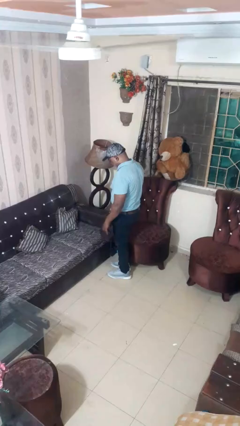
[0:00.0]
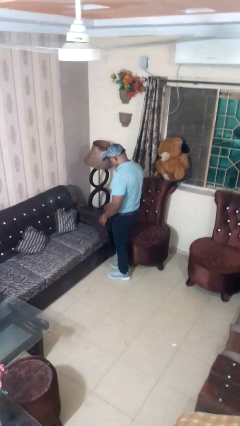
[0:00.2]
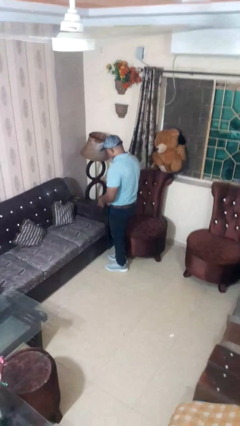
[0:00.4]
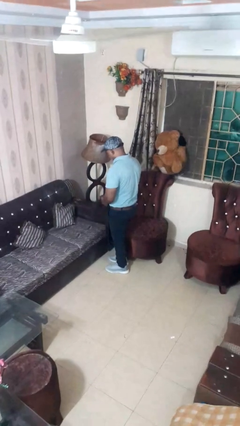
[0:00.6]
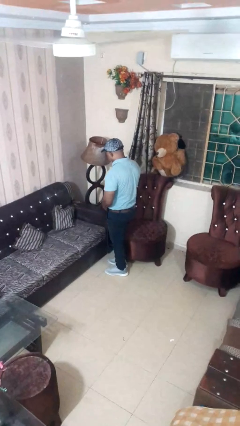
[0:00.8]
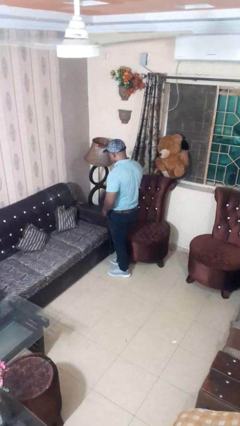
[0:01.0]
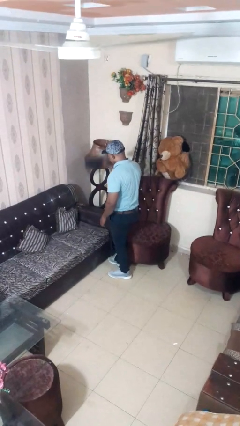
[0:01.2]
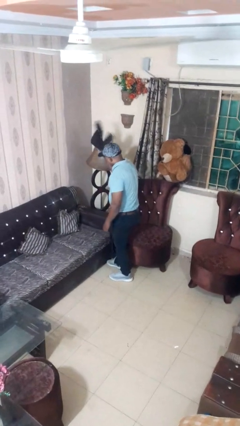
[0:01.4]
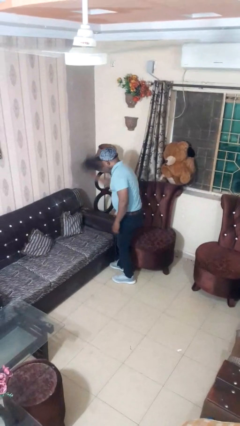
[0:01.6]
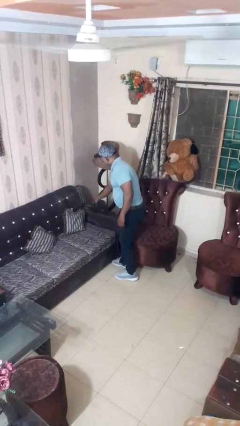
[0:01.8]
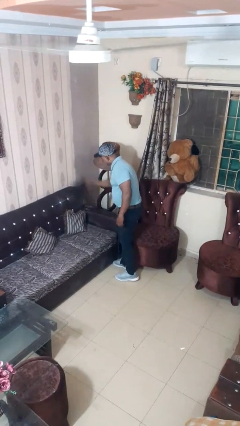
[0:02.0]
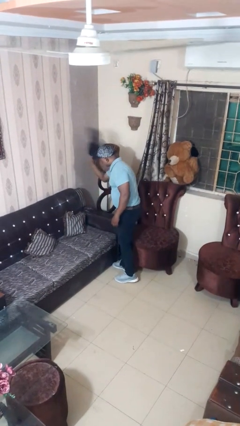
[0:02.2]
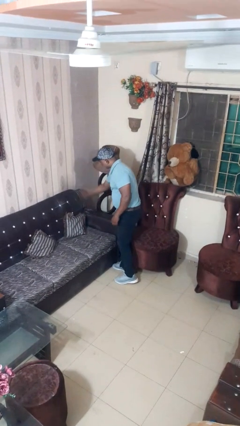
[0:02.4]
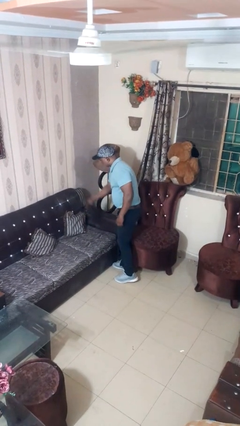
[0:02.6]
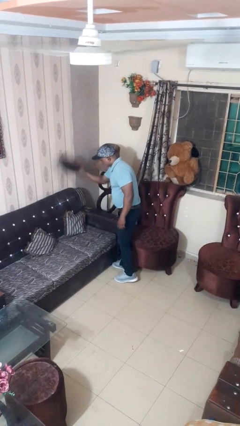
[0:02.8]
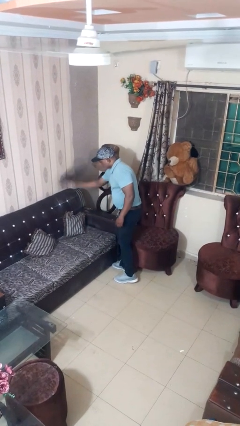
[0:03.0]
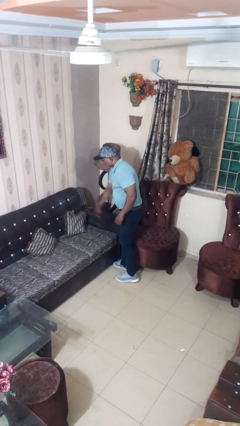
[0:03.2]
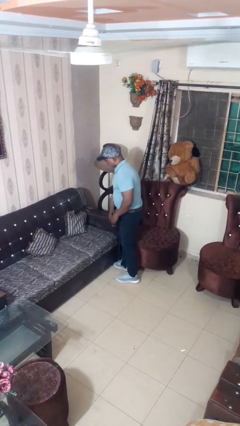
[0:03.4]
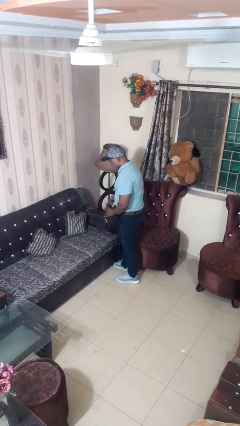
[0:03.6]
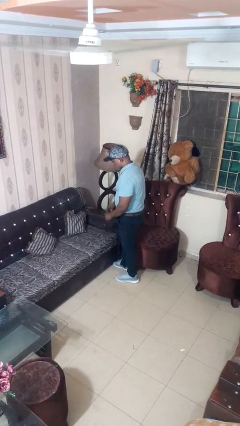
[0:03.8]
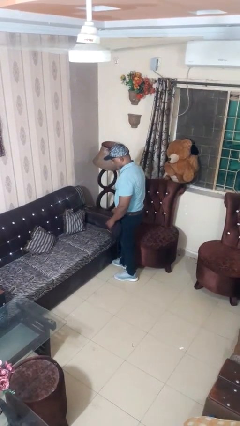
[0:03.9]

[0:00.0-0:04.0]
person dusts furniture

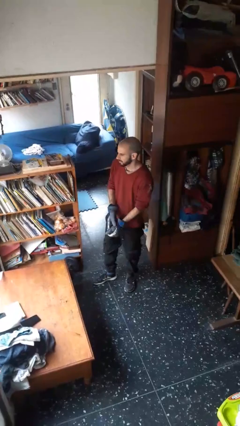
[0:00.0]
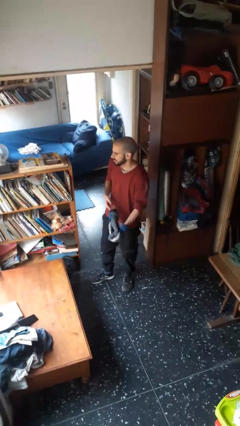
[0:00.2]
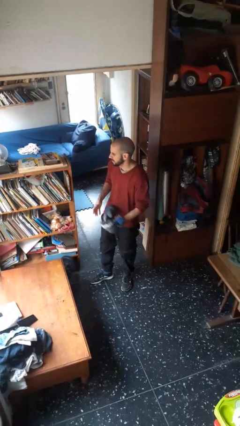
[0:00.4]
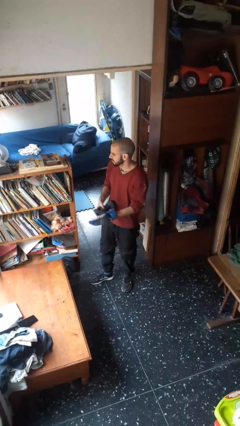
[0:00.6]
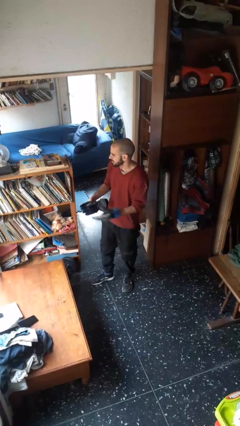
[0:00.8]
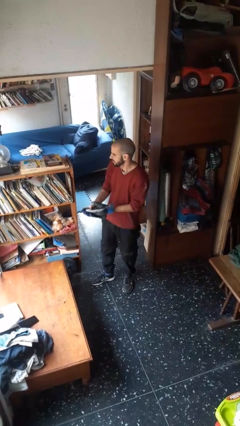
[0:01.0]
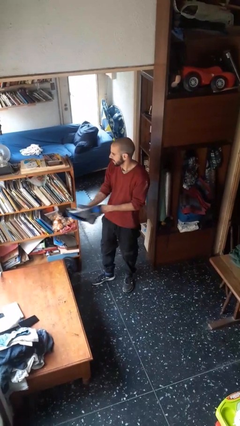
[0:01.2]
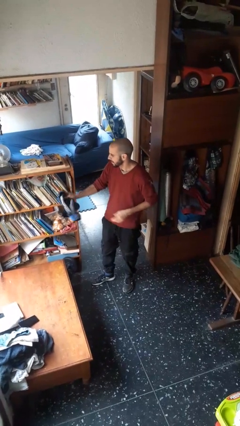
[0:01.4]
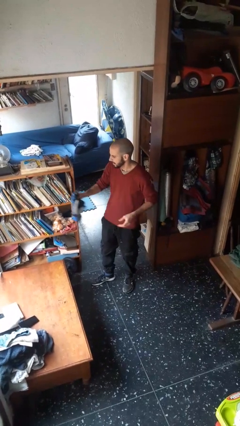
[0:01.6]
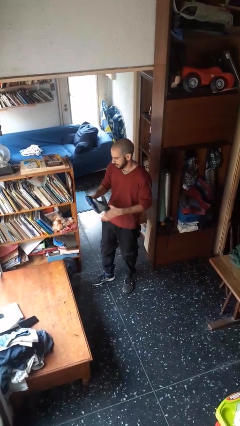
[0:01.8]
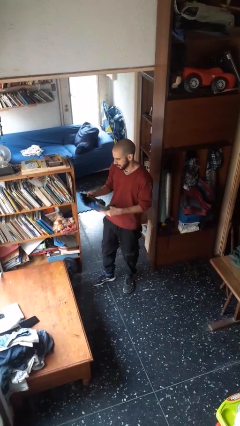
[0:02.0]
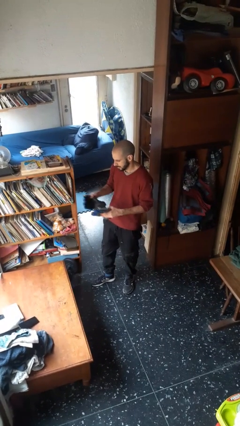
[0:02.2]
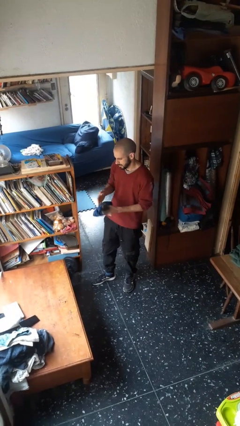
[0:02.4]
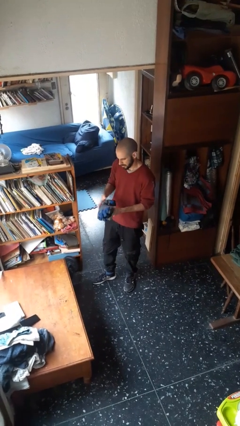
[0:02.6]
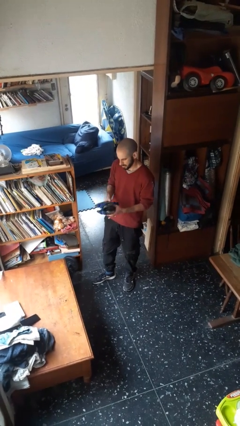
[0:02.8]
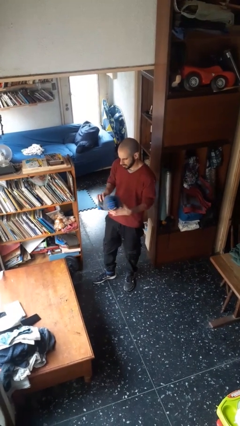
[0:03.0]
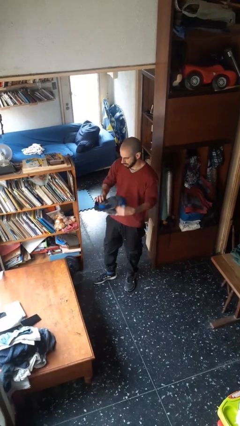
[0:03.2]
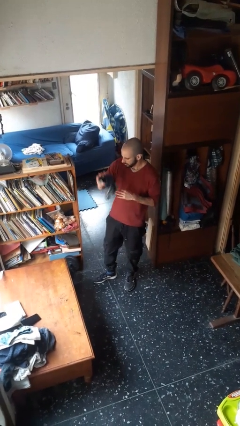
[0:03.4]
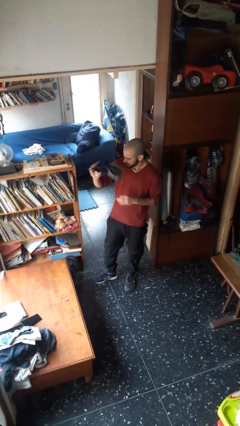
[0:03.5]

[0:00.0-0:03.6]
person takes off gloves

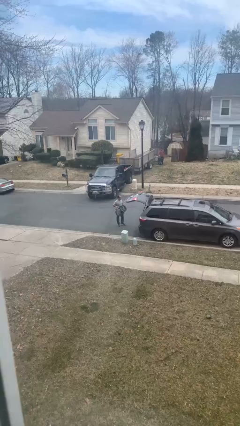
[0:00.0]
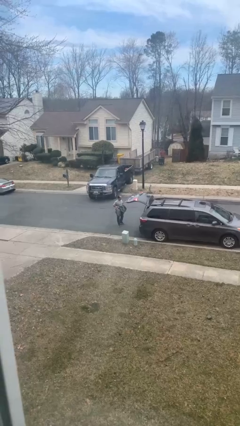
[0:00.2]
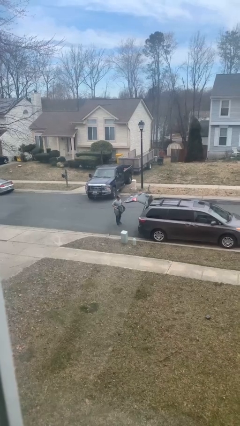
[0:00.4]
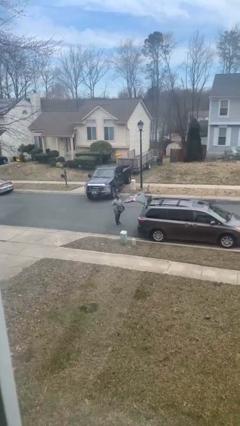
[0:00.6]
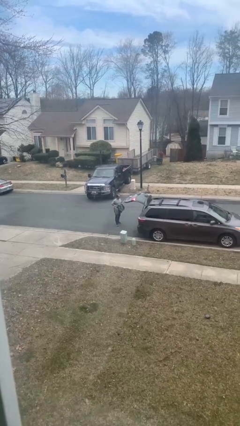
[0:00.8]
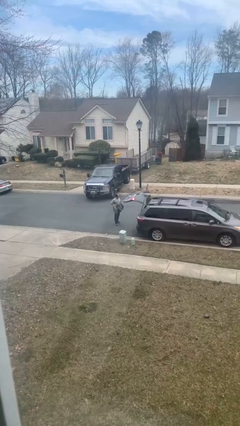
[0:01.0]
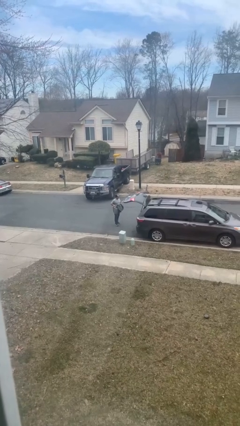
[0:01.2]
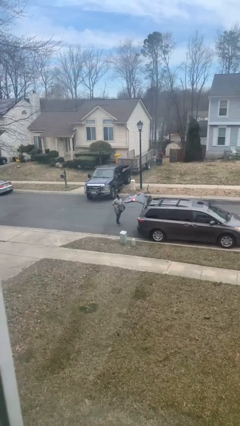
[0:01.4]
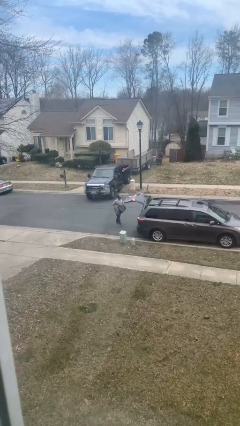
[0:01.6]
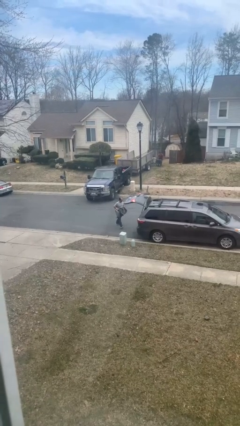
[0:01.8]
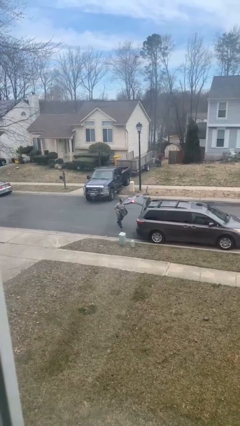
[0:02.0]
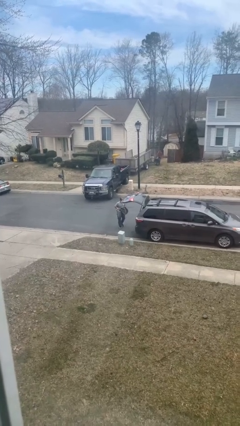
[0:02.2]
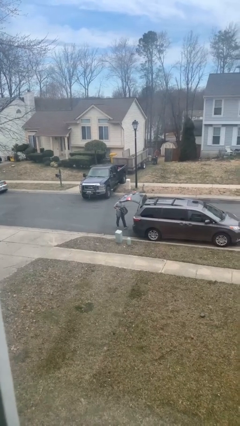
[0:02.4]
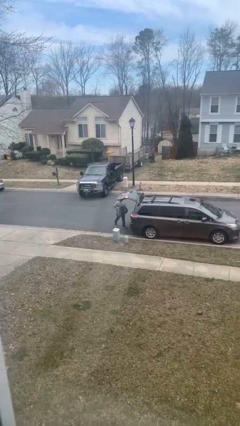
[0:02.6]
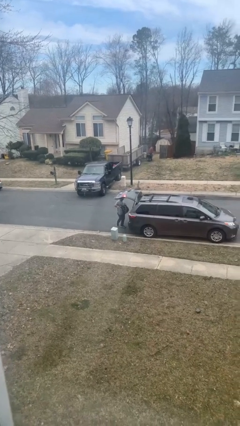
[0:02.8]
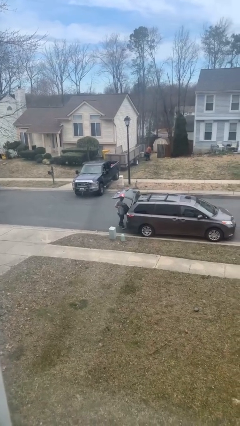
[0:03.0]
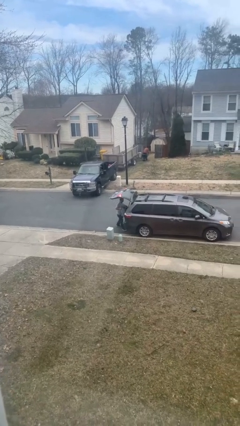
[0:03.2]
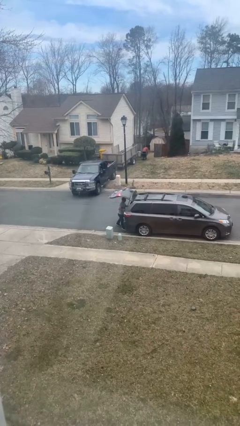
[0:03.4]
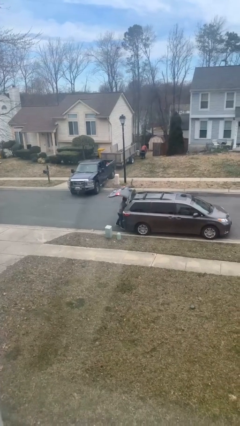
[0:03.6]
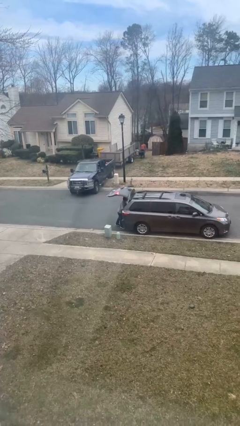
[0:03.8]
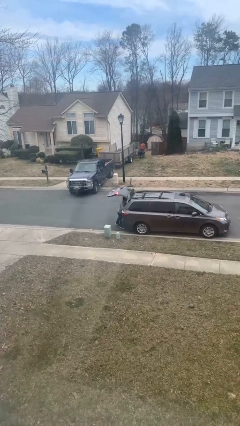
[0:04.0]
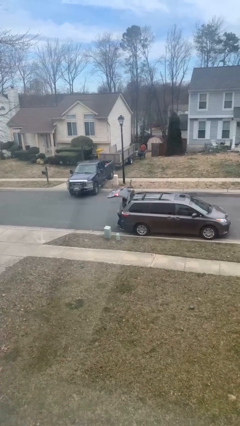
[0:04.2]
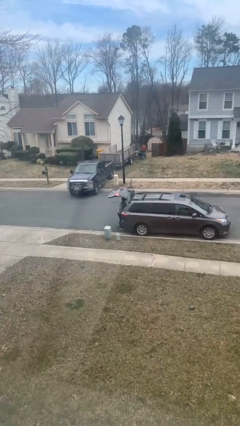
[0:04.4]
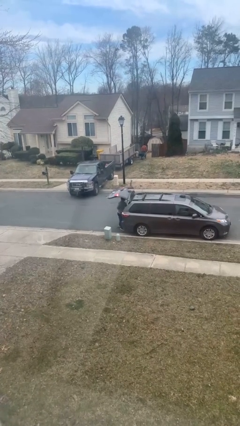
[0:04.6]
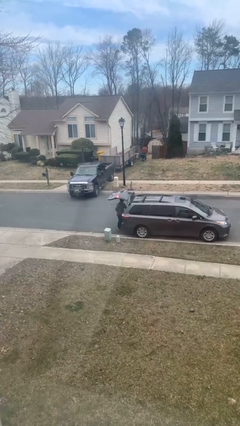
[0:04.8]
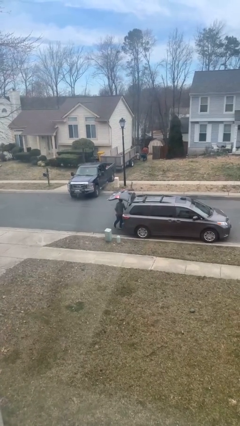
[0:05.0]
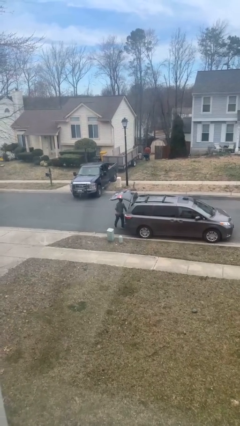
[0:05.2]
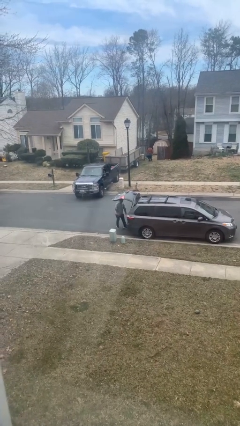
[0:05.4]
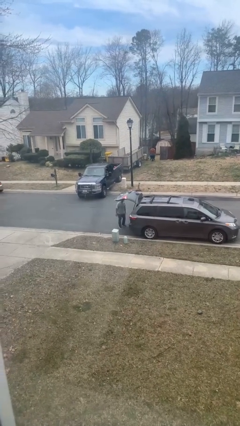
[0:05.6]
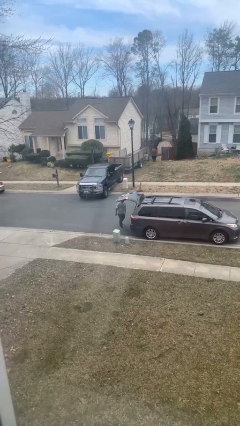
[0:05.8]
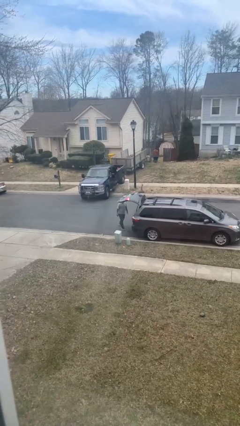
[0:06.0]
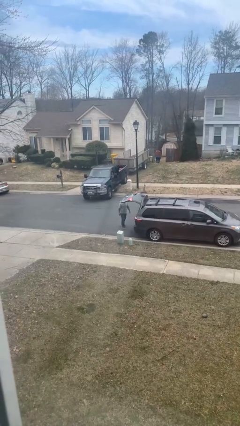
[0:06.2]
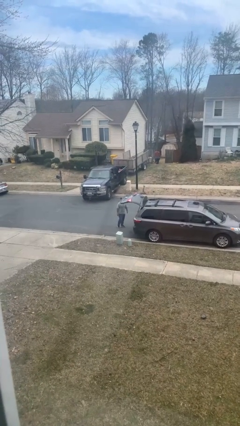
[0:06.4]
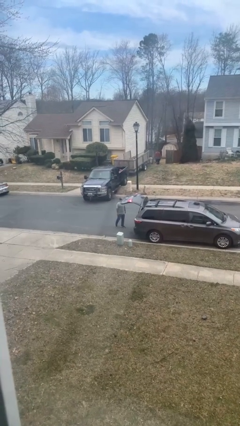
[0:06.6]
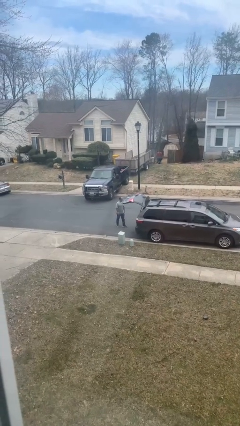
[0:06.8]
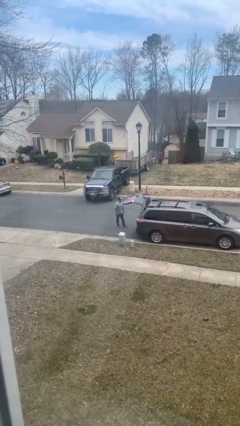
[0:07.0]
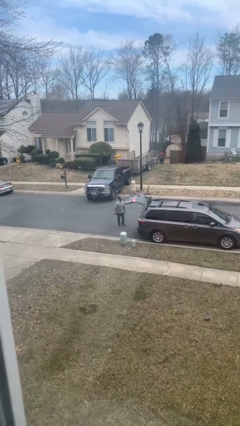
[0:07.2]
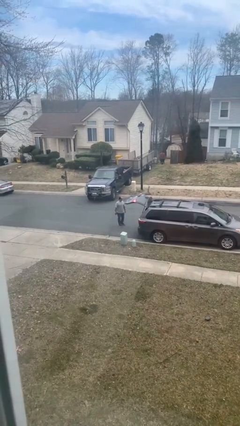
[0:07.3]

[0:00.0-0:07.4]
person loads car

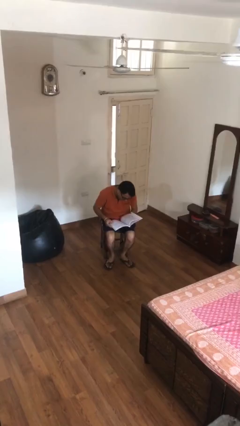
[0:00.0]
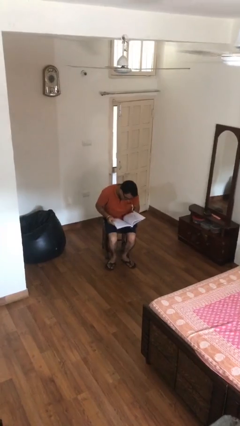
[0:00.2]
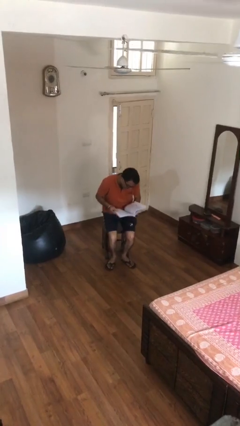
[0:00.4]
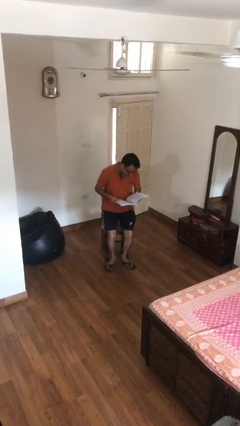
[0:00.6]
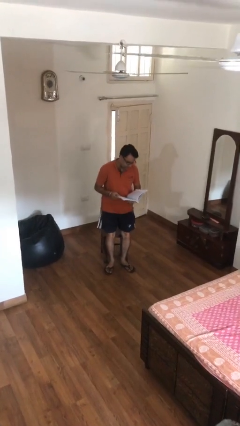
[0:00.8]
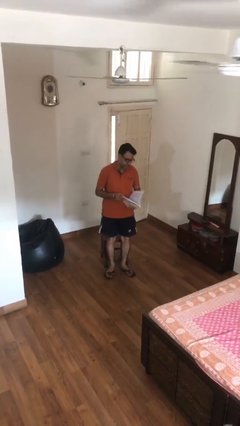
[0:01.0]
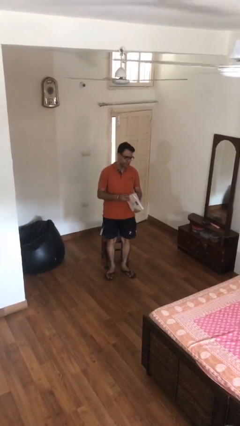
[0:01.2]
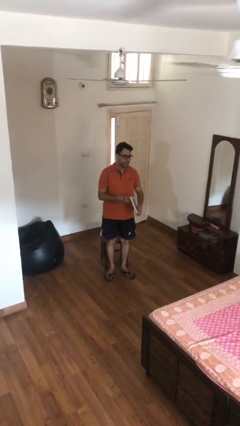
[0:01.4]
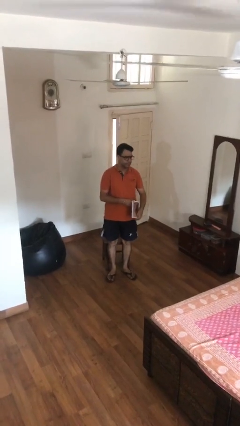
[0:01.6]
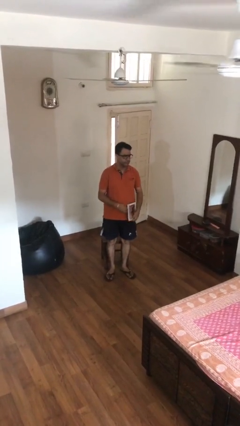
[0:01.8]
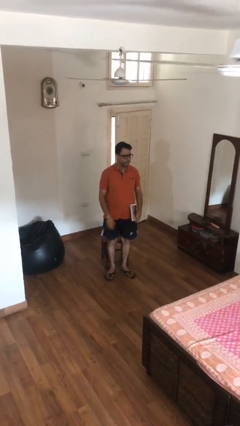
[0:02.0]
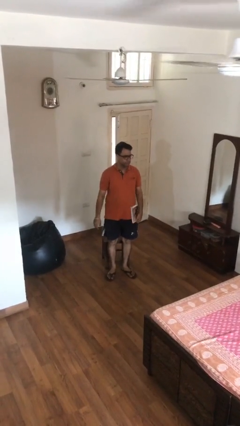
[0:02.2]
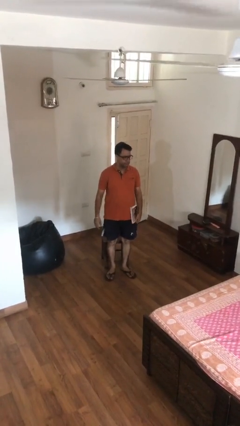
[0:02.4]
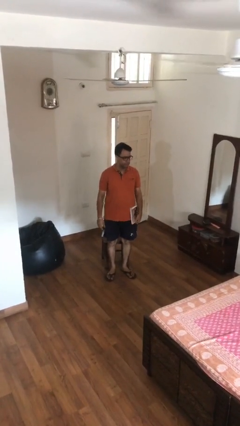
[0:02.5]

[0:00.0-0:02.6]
person stands up
